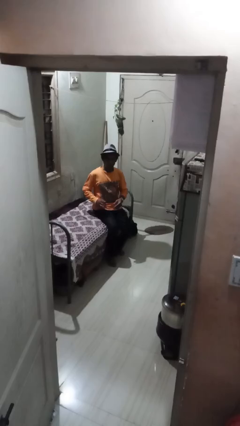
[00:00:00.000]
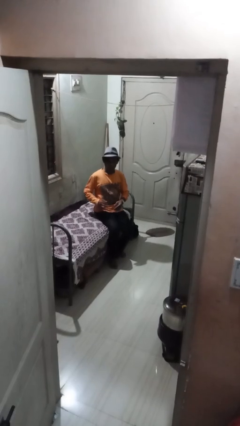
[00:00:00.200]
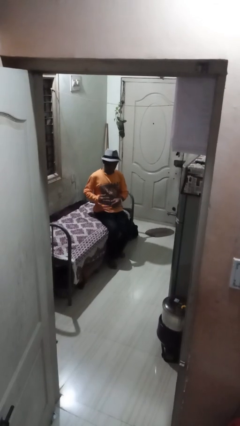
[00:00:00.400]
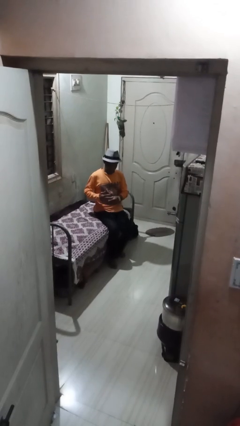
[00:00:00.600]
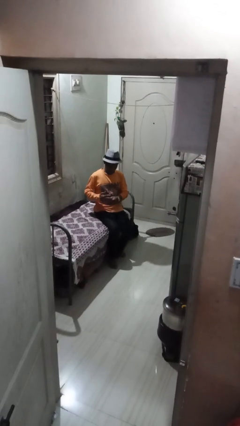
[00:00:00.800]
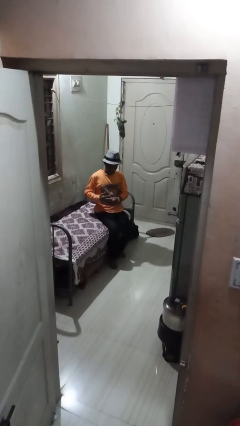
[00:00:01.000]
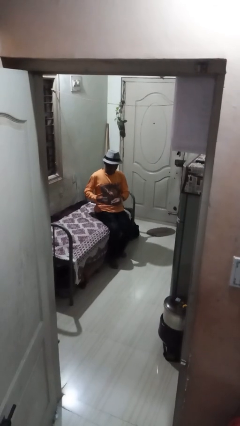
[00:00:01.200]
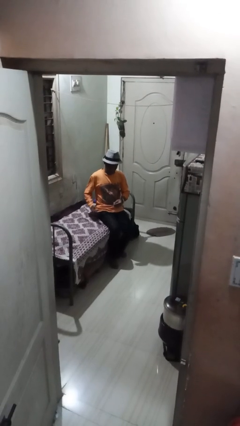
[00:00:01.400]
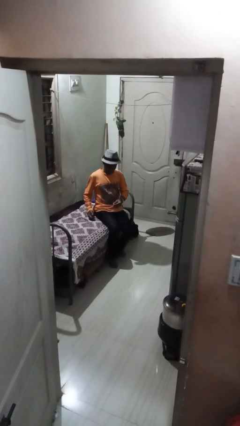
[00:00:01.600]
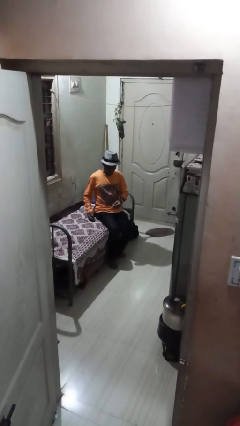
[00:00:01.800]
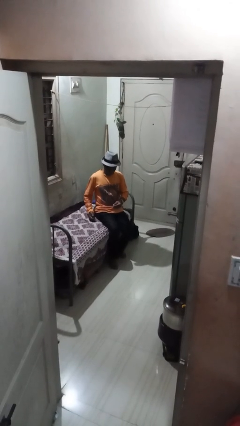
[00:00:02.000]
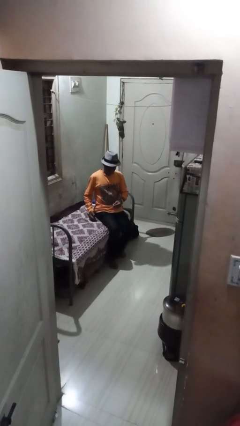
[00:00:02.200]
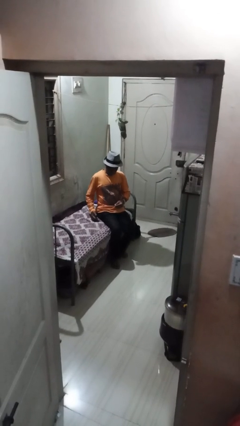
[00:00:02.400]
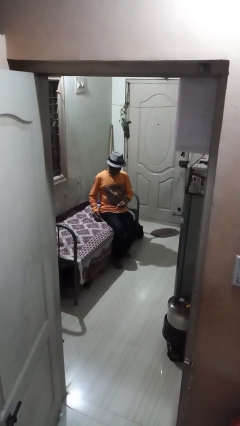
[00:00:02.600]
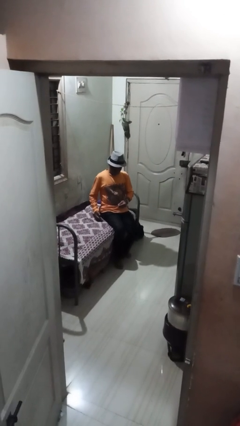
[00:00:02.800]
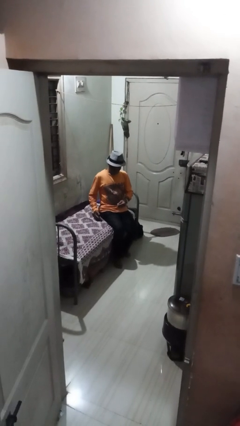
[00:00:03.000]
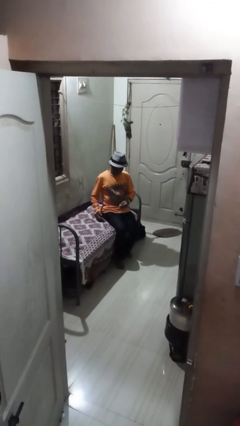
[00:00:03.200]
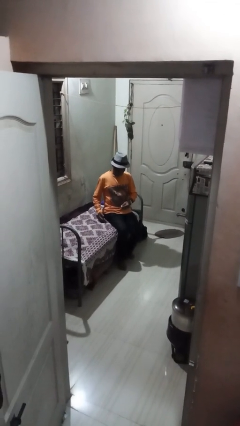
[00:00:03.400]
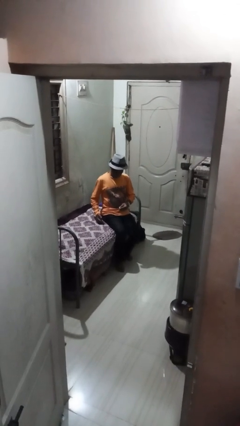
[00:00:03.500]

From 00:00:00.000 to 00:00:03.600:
person takes off ring

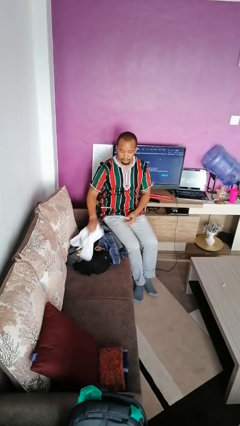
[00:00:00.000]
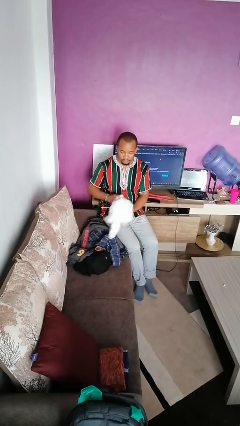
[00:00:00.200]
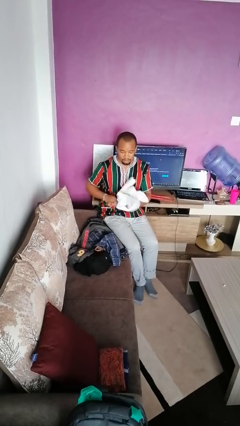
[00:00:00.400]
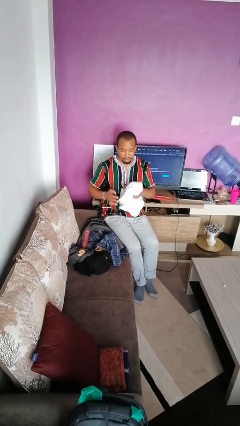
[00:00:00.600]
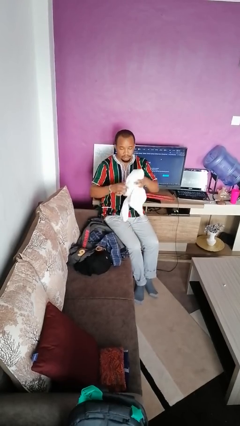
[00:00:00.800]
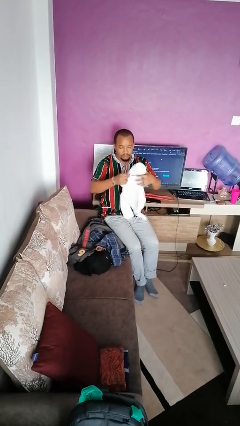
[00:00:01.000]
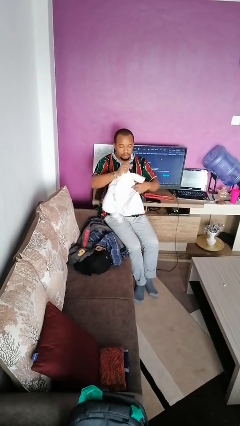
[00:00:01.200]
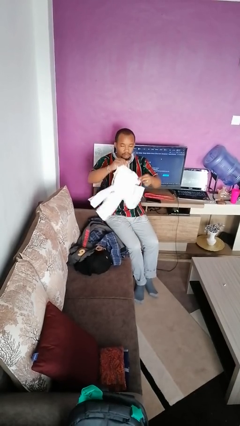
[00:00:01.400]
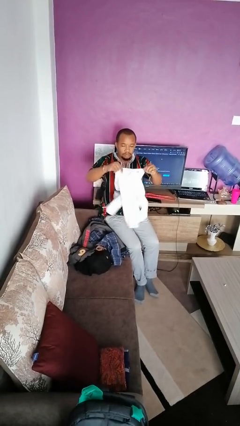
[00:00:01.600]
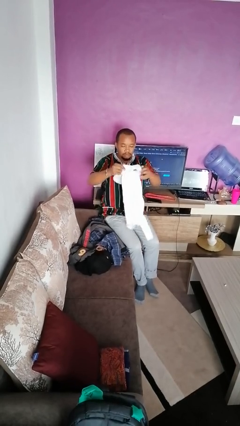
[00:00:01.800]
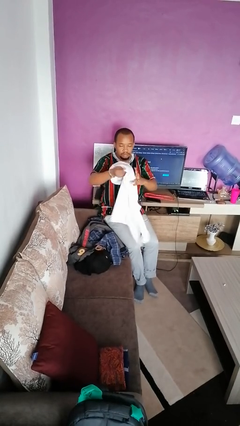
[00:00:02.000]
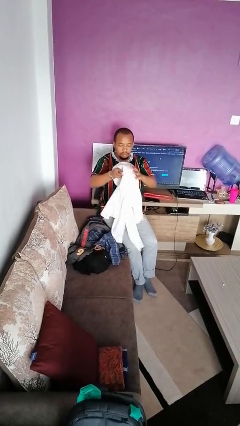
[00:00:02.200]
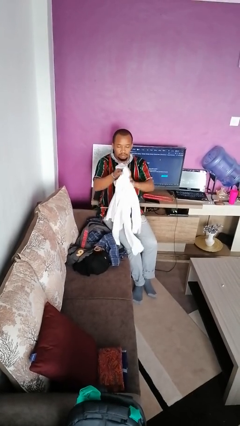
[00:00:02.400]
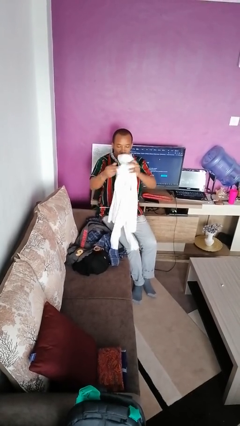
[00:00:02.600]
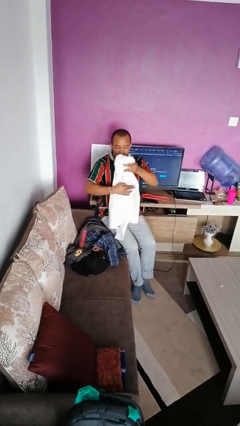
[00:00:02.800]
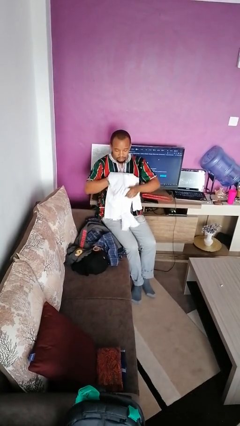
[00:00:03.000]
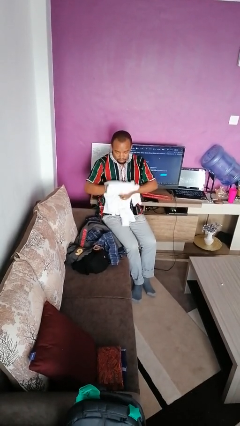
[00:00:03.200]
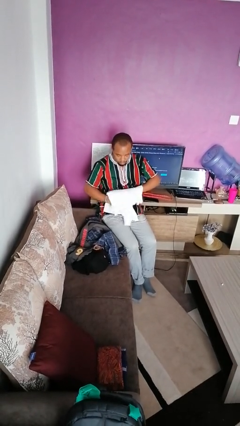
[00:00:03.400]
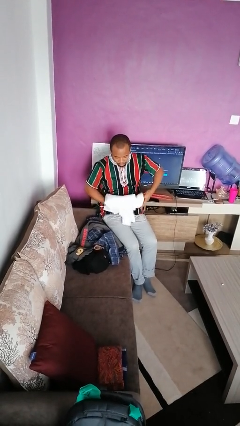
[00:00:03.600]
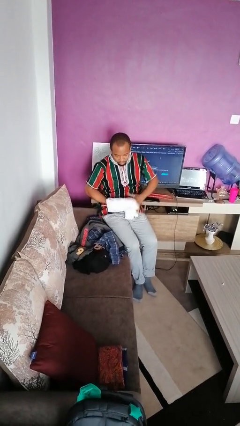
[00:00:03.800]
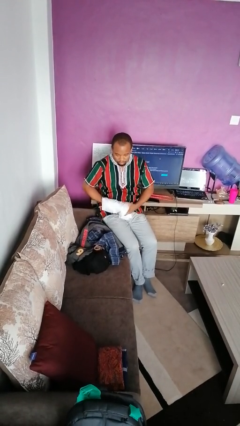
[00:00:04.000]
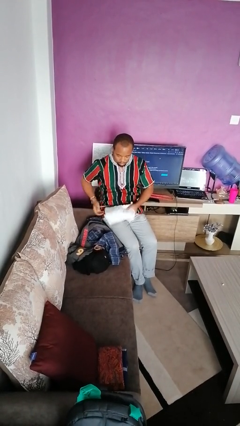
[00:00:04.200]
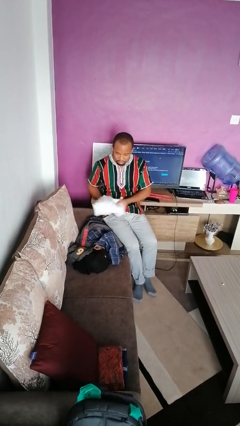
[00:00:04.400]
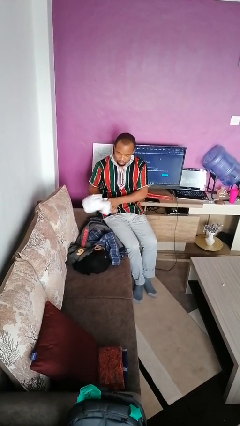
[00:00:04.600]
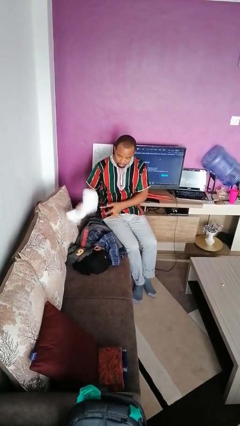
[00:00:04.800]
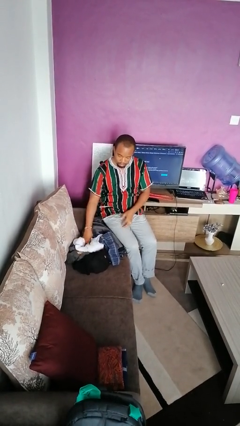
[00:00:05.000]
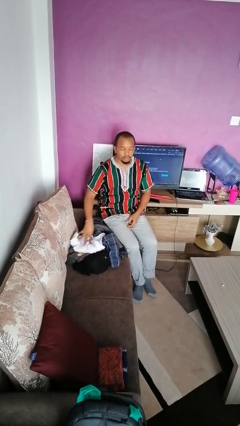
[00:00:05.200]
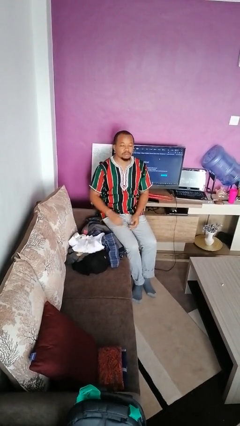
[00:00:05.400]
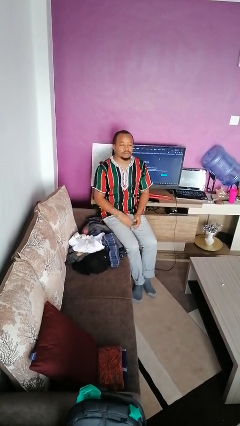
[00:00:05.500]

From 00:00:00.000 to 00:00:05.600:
person folds shirt

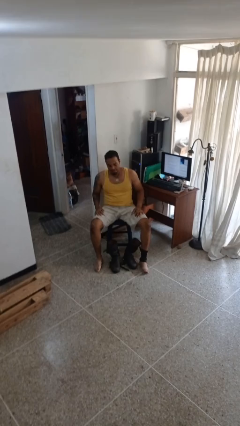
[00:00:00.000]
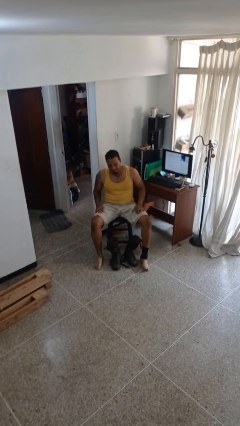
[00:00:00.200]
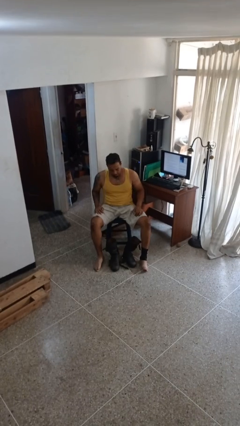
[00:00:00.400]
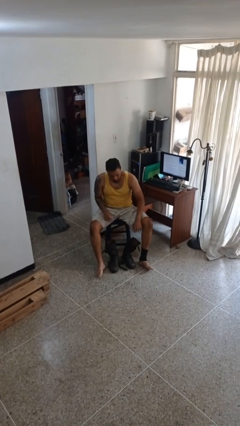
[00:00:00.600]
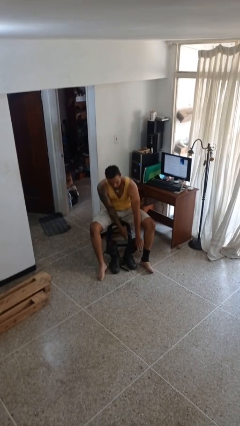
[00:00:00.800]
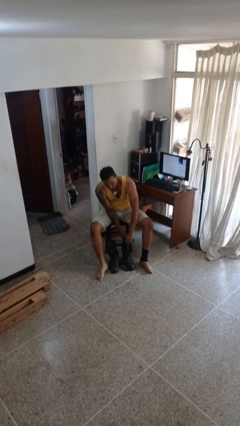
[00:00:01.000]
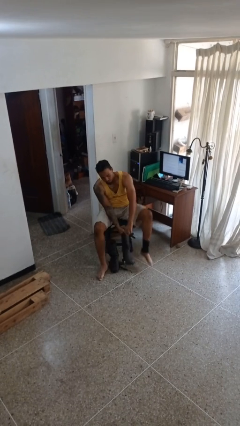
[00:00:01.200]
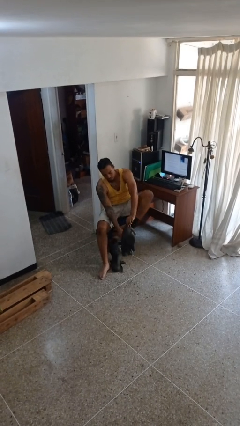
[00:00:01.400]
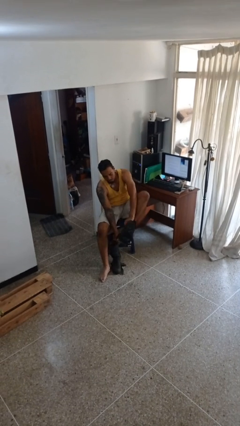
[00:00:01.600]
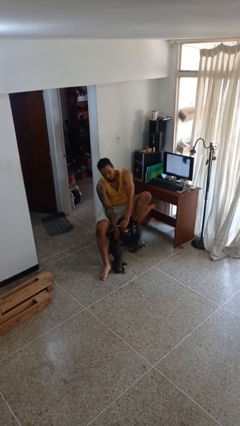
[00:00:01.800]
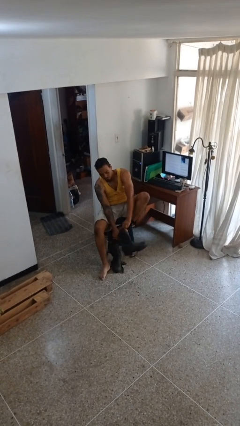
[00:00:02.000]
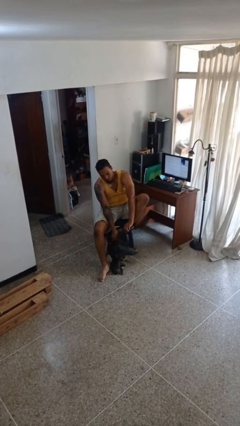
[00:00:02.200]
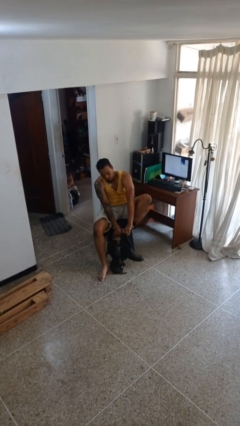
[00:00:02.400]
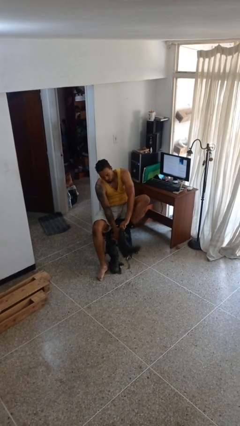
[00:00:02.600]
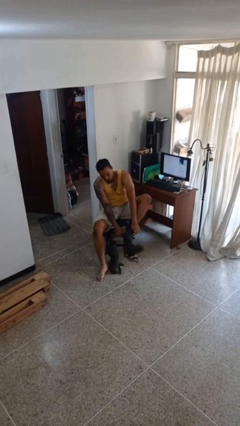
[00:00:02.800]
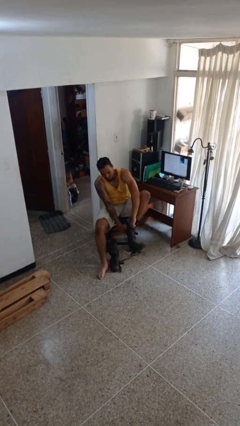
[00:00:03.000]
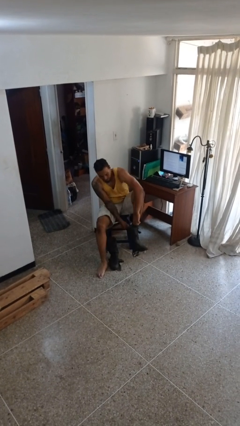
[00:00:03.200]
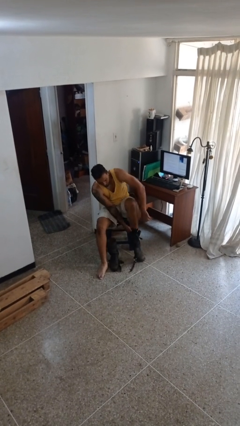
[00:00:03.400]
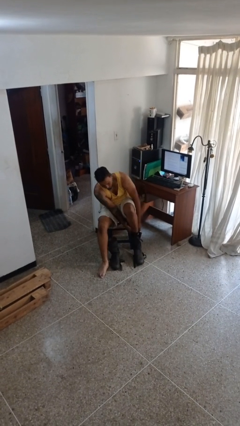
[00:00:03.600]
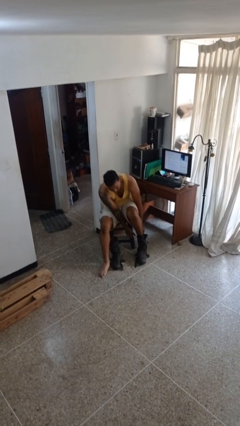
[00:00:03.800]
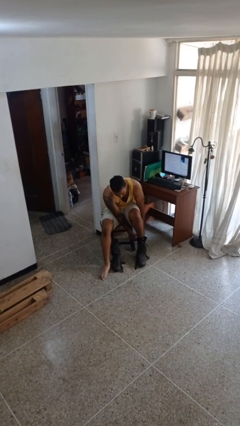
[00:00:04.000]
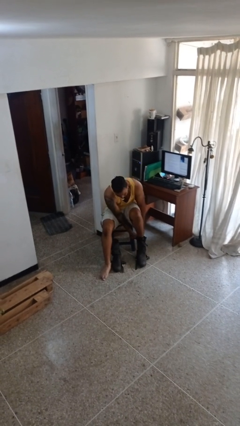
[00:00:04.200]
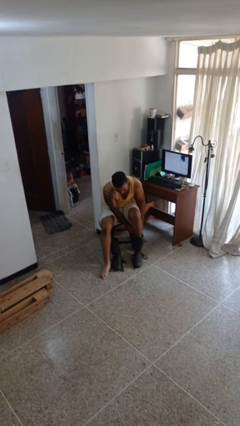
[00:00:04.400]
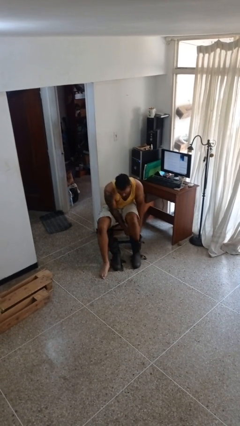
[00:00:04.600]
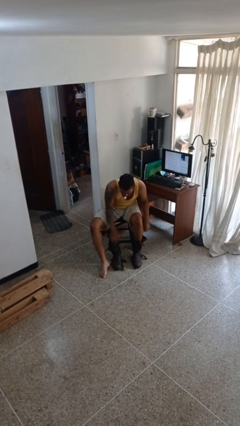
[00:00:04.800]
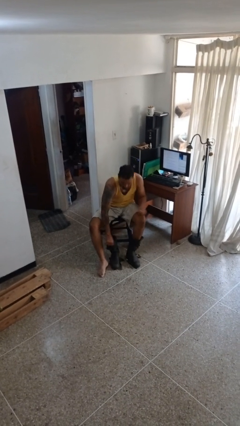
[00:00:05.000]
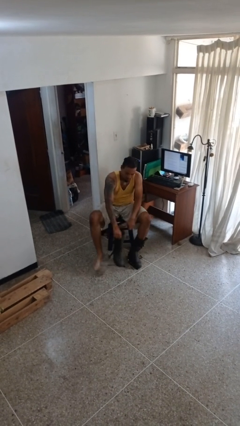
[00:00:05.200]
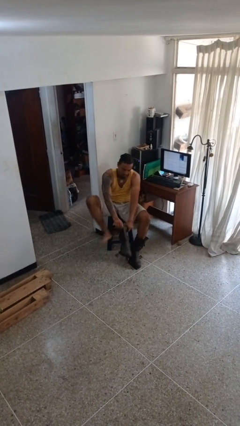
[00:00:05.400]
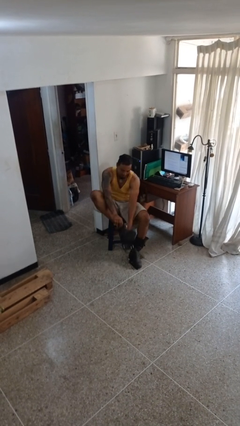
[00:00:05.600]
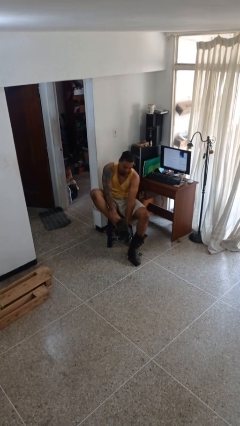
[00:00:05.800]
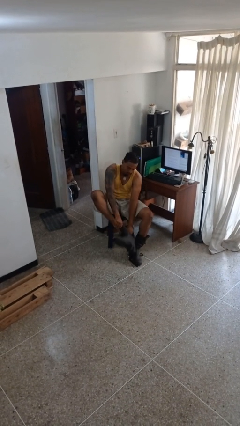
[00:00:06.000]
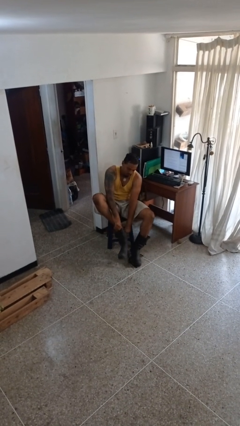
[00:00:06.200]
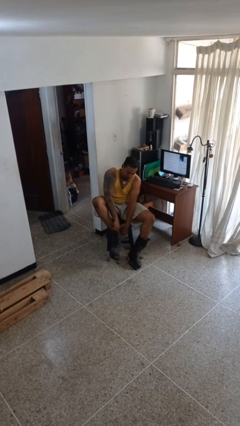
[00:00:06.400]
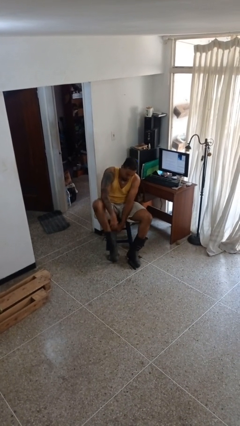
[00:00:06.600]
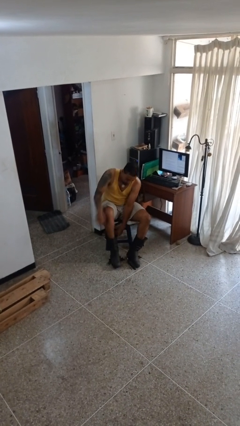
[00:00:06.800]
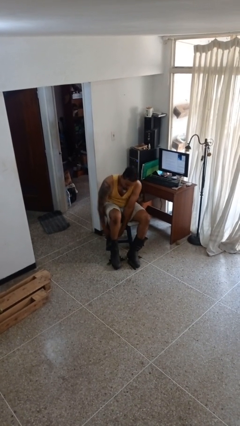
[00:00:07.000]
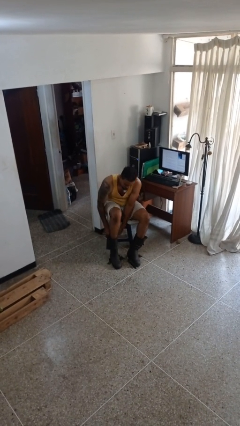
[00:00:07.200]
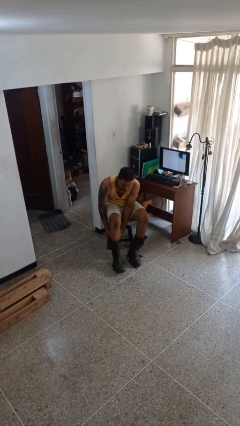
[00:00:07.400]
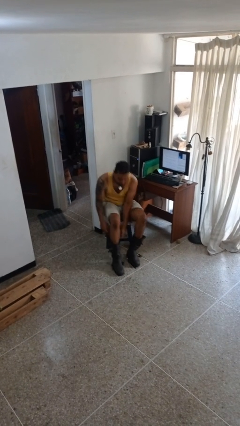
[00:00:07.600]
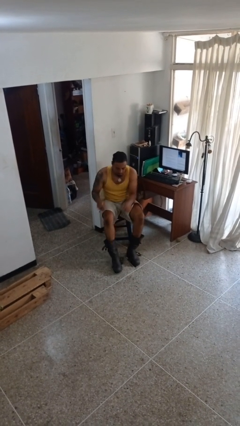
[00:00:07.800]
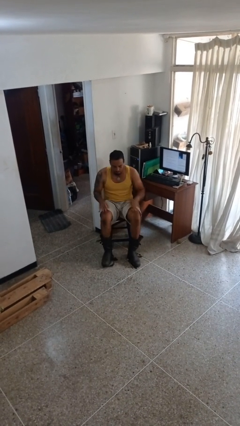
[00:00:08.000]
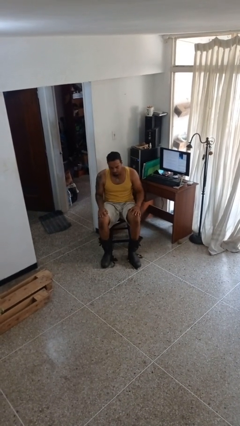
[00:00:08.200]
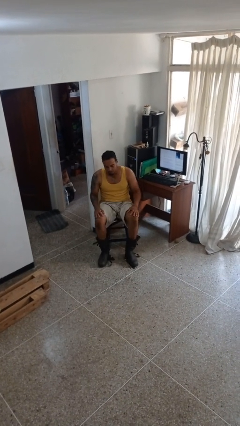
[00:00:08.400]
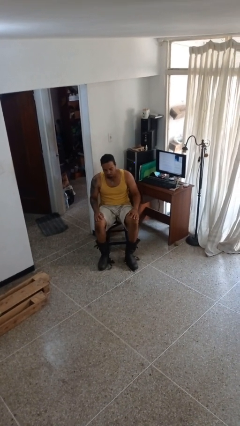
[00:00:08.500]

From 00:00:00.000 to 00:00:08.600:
person puts on boots
